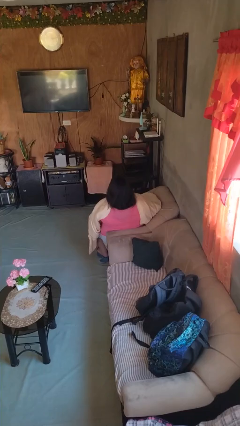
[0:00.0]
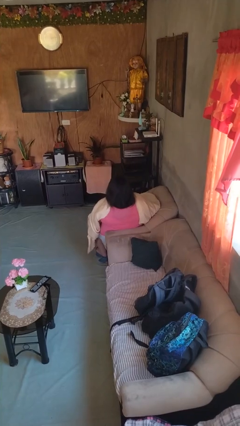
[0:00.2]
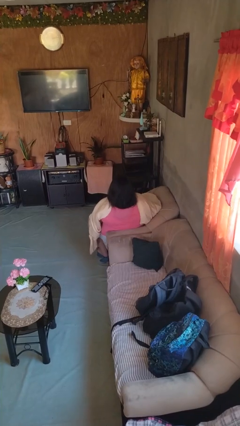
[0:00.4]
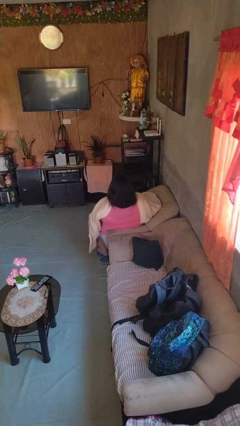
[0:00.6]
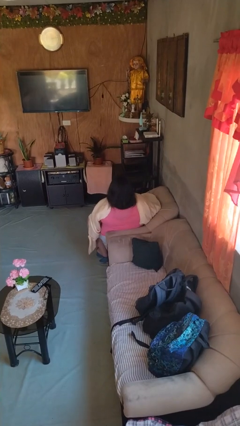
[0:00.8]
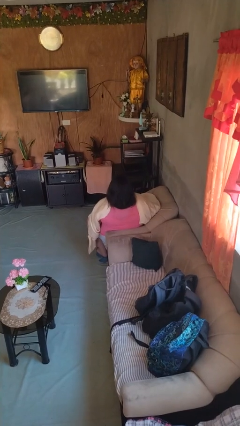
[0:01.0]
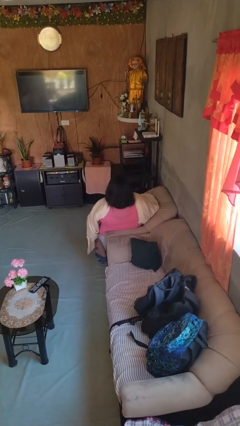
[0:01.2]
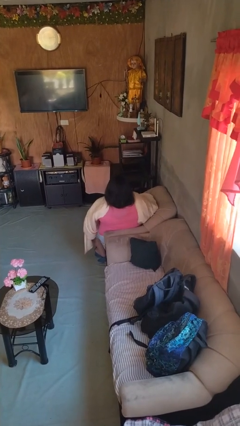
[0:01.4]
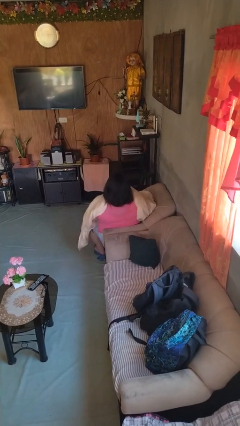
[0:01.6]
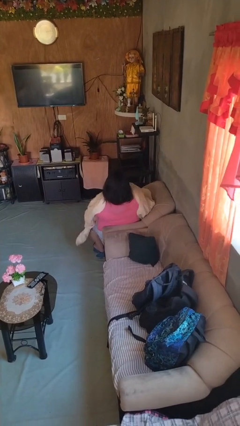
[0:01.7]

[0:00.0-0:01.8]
person uncovers with blanket

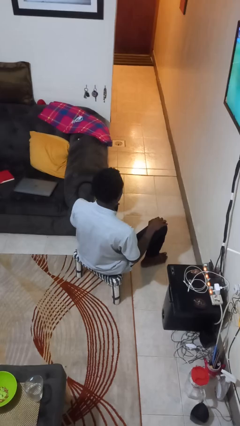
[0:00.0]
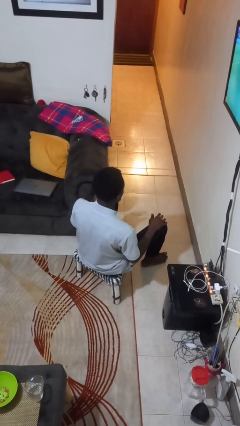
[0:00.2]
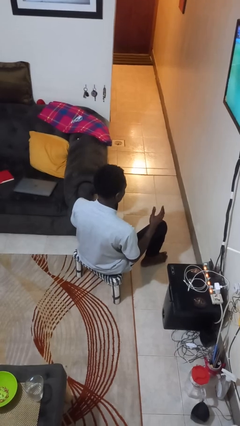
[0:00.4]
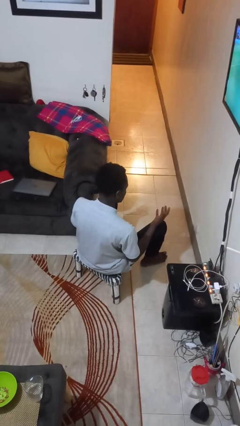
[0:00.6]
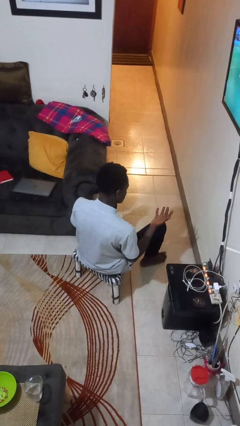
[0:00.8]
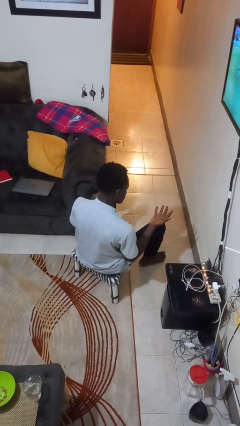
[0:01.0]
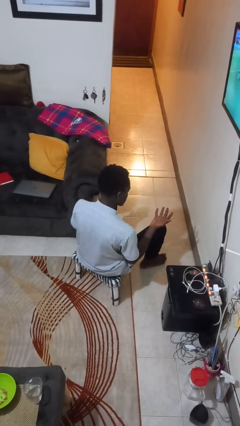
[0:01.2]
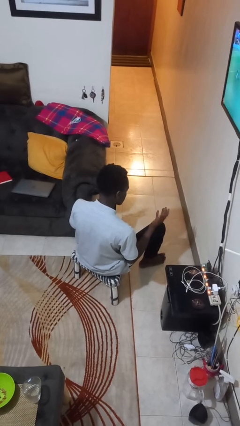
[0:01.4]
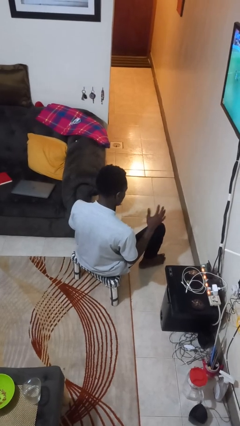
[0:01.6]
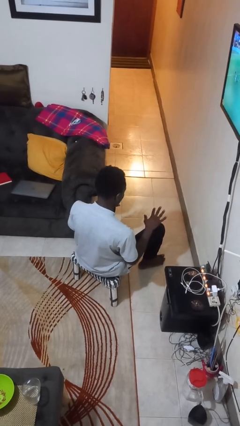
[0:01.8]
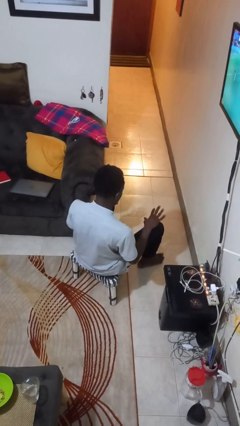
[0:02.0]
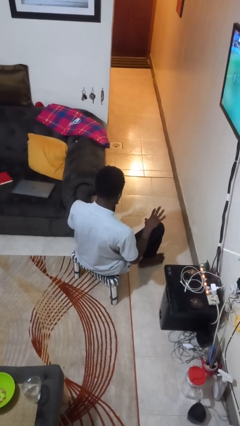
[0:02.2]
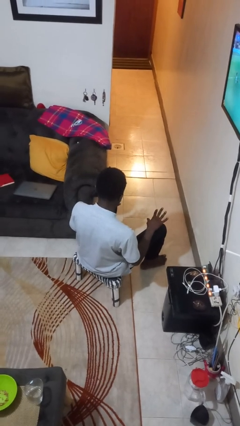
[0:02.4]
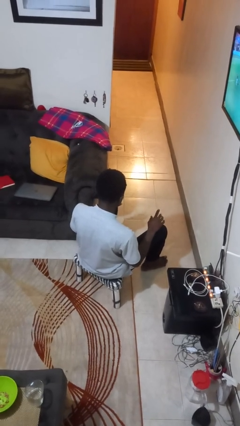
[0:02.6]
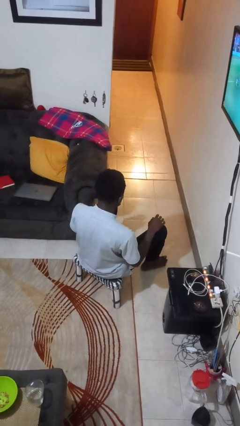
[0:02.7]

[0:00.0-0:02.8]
person looks at hands in lap

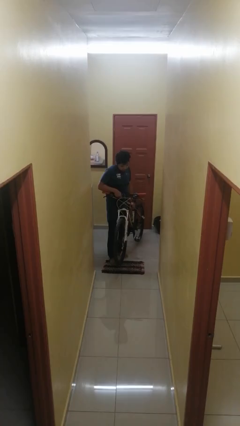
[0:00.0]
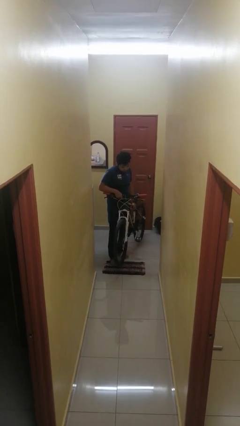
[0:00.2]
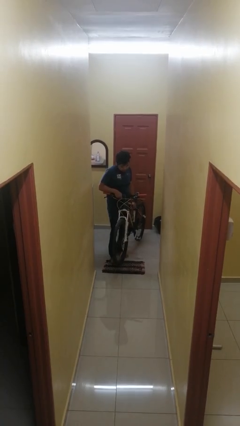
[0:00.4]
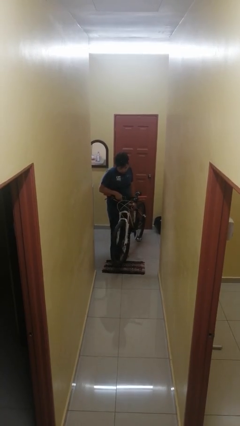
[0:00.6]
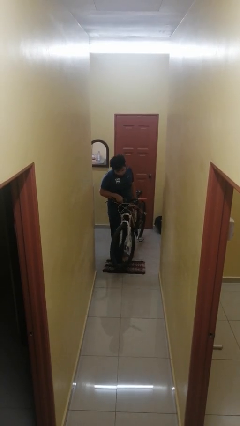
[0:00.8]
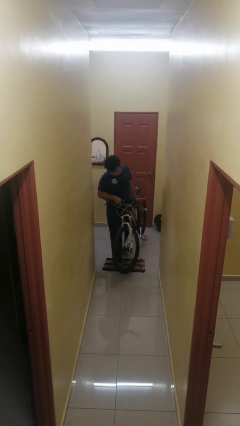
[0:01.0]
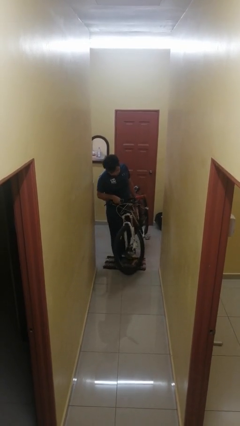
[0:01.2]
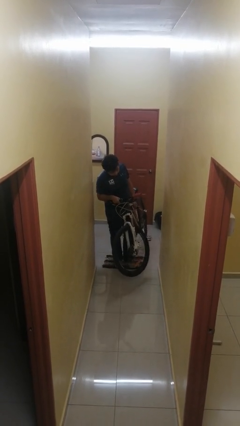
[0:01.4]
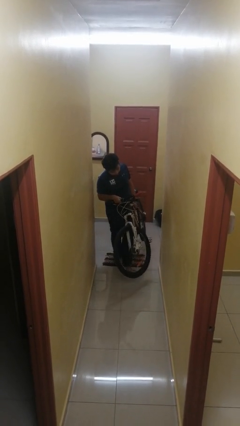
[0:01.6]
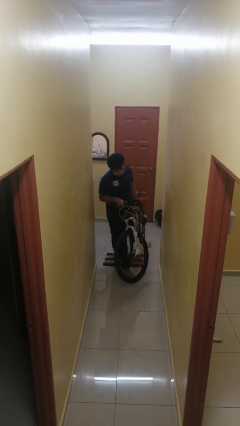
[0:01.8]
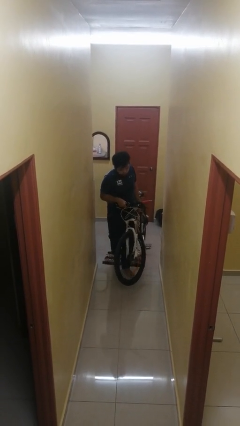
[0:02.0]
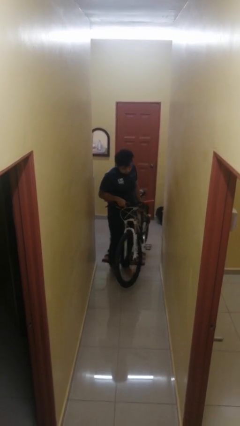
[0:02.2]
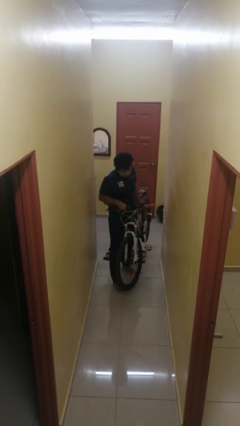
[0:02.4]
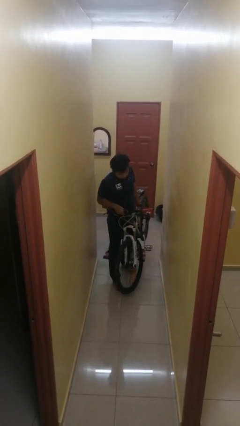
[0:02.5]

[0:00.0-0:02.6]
person carries bicycle

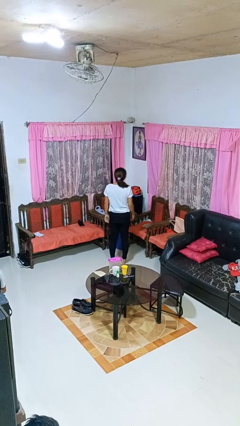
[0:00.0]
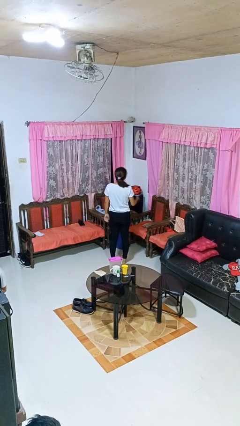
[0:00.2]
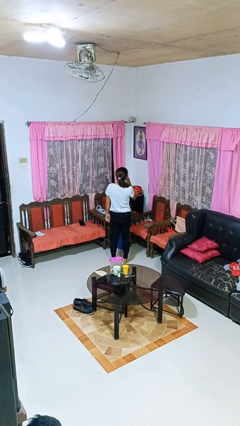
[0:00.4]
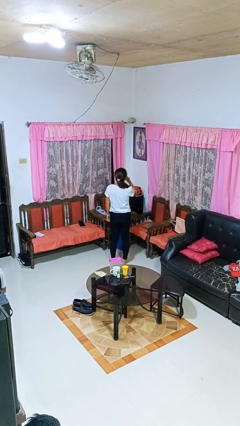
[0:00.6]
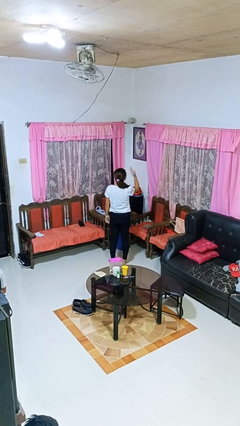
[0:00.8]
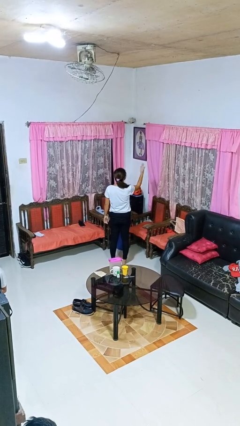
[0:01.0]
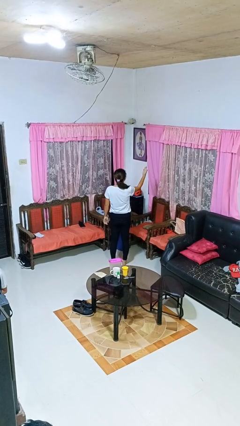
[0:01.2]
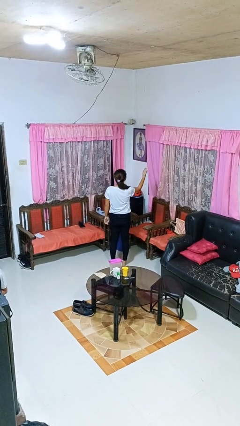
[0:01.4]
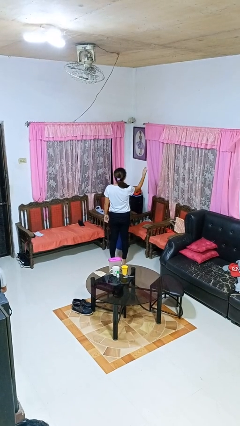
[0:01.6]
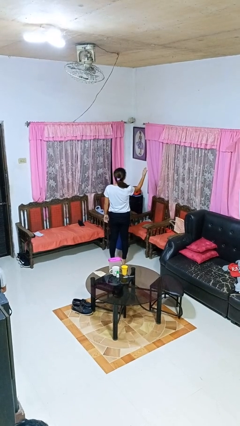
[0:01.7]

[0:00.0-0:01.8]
person gestures blow kiss

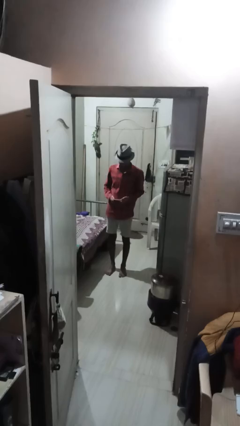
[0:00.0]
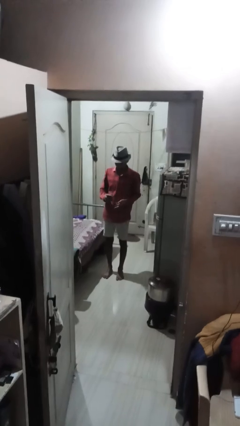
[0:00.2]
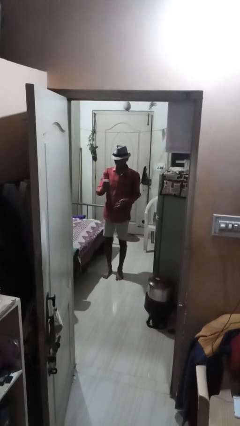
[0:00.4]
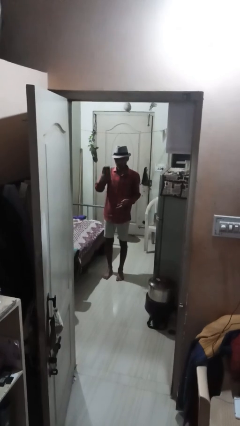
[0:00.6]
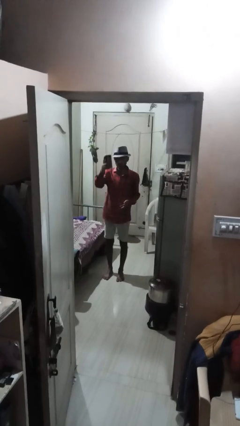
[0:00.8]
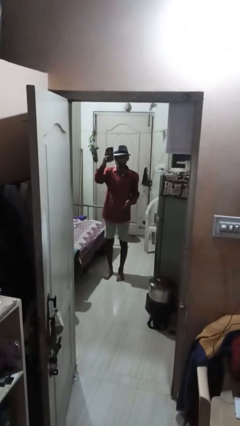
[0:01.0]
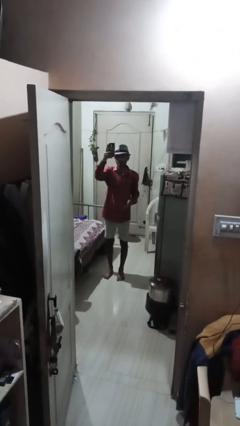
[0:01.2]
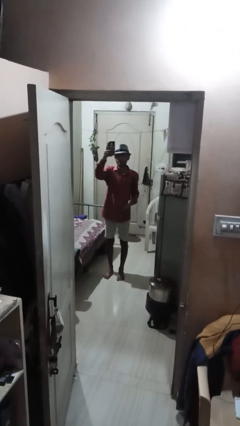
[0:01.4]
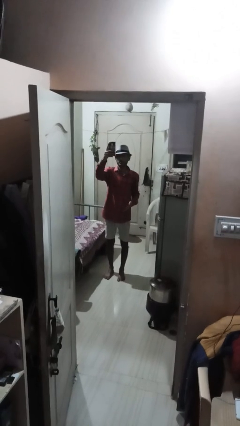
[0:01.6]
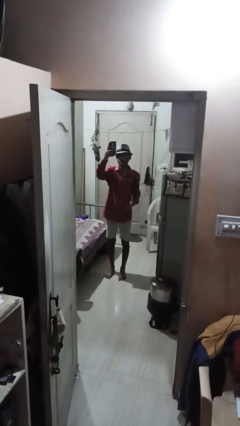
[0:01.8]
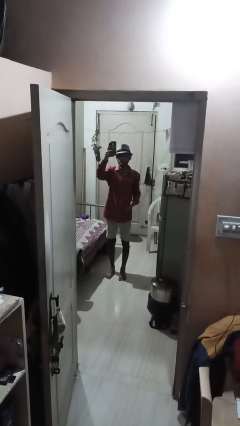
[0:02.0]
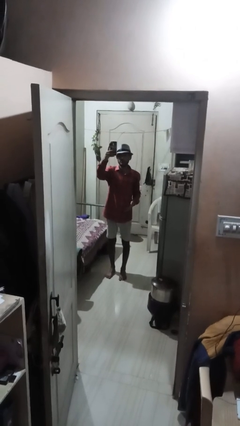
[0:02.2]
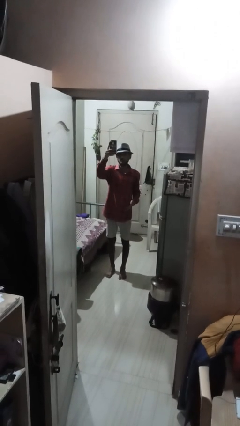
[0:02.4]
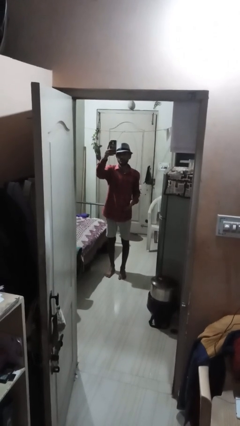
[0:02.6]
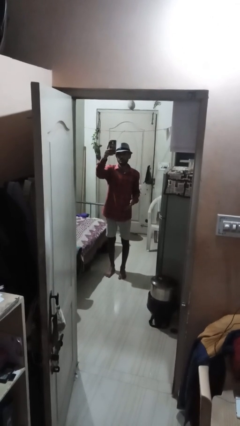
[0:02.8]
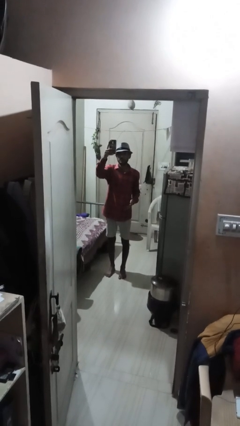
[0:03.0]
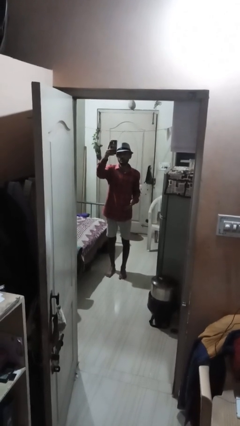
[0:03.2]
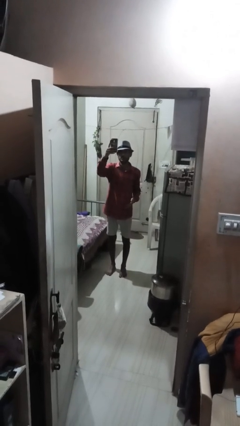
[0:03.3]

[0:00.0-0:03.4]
person takes selfie

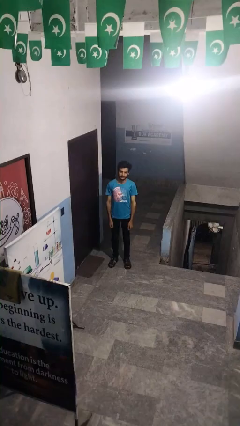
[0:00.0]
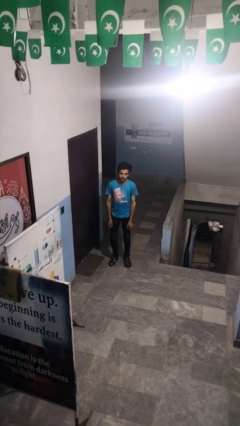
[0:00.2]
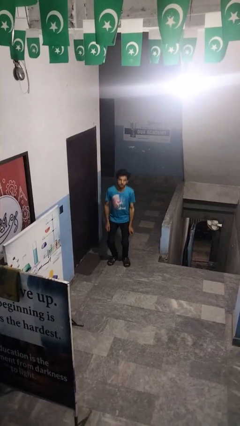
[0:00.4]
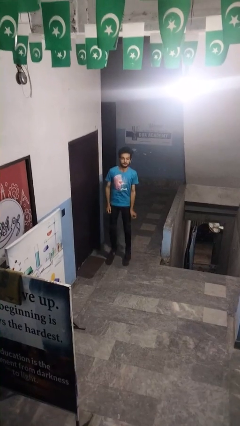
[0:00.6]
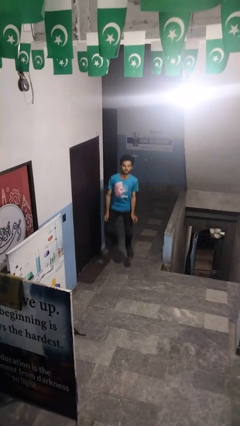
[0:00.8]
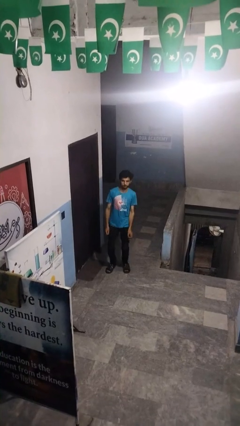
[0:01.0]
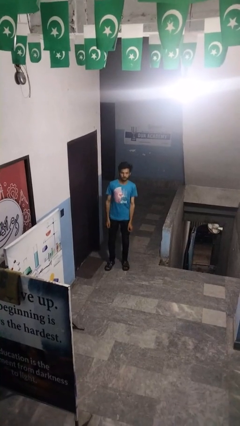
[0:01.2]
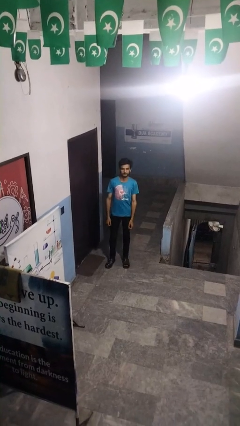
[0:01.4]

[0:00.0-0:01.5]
person jumps

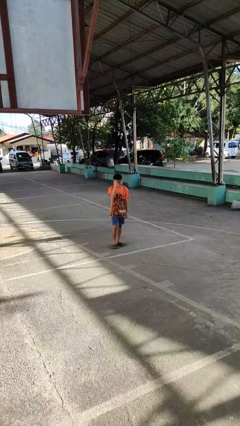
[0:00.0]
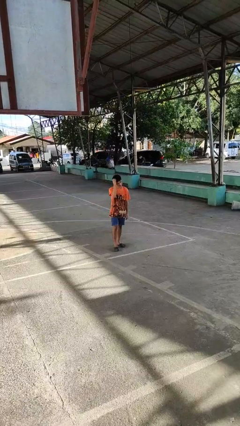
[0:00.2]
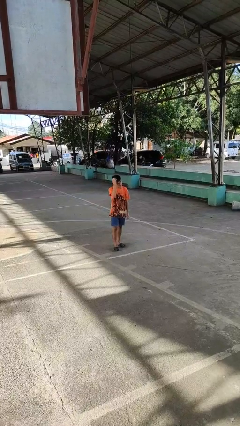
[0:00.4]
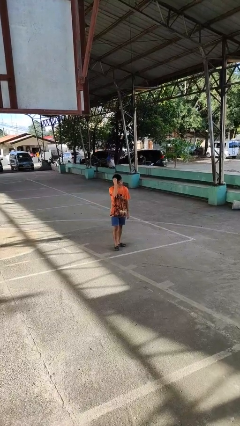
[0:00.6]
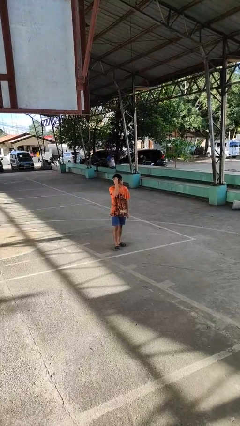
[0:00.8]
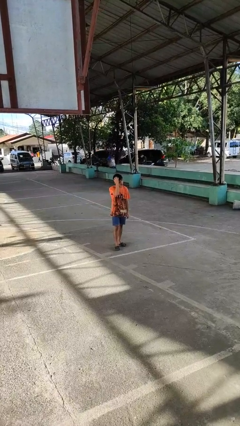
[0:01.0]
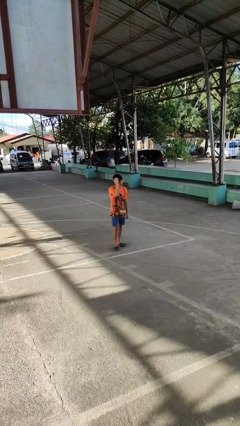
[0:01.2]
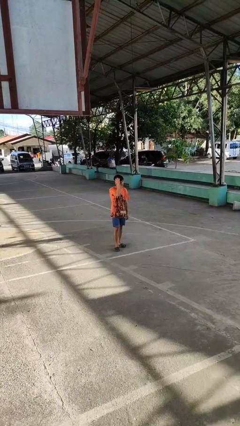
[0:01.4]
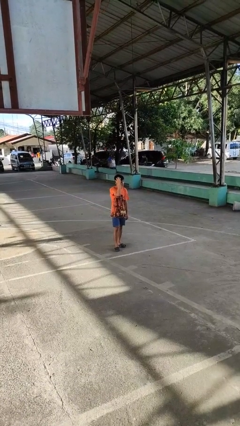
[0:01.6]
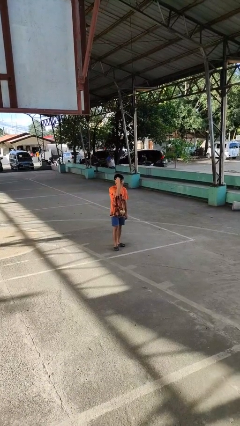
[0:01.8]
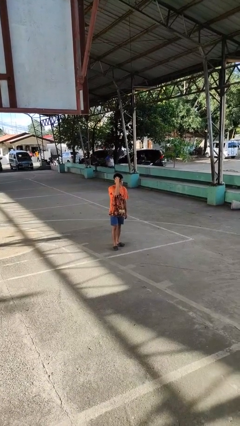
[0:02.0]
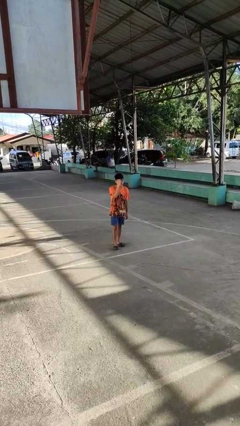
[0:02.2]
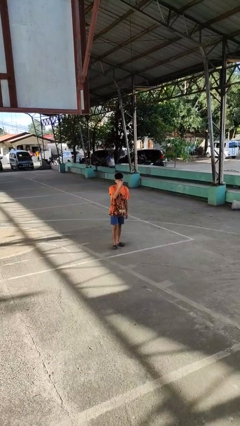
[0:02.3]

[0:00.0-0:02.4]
person scratches face

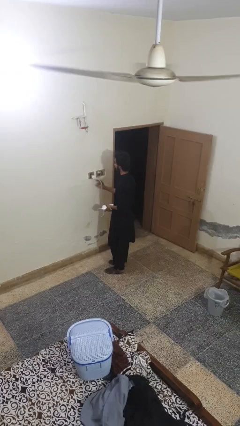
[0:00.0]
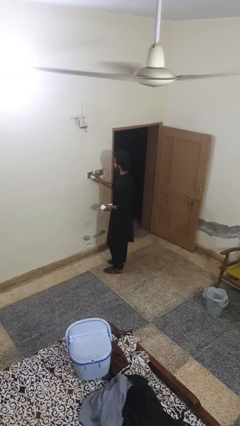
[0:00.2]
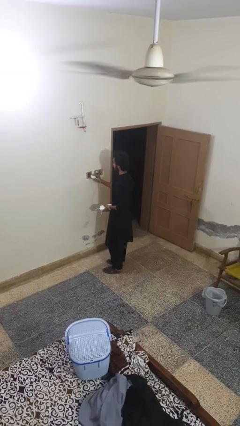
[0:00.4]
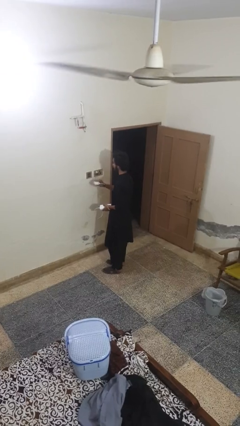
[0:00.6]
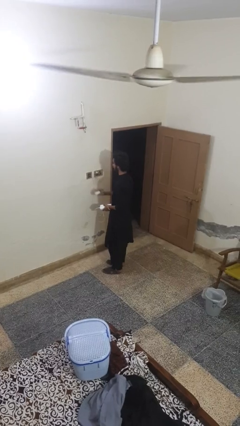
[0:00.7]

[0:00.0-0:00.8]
person unplugs from electrical socket
